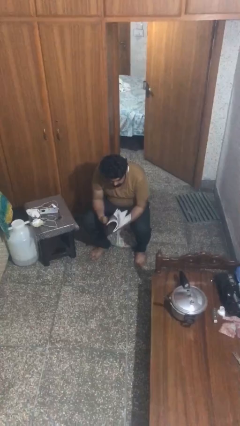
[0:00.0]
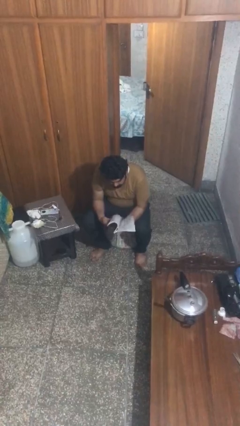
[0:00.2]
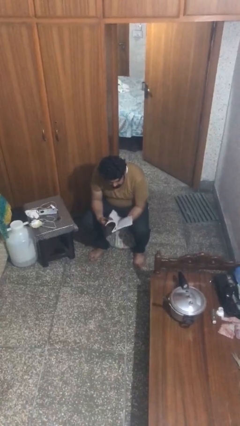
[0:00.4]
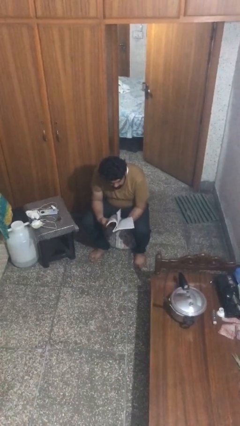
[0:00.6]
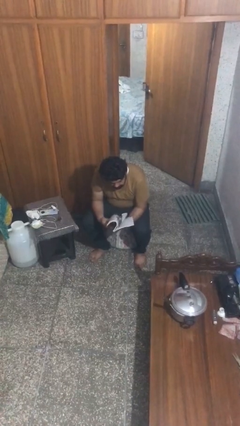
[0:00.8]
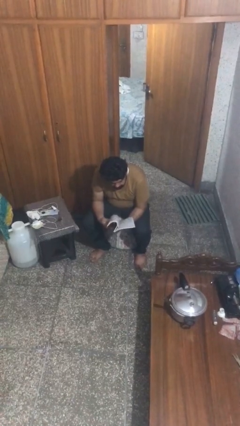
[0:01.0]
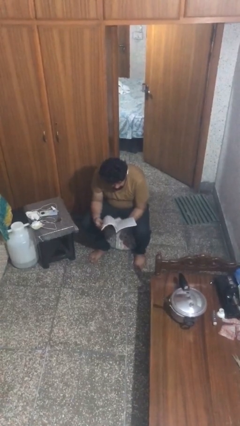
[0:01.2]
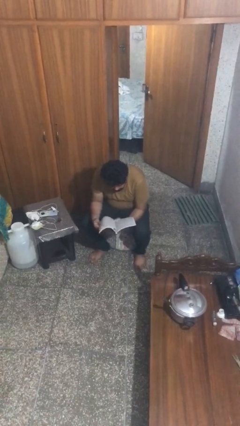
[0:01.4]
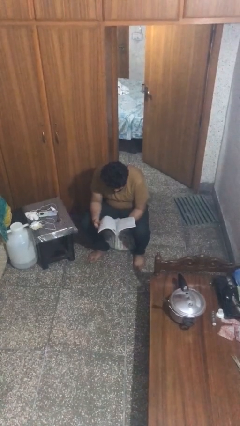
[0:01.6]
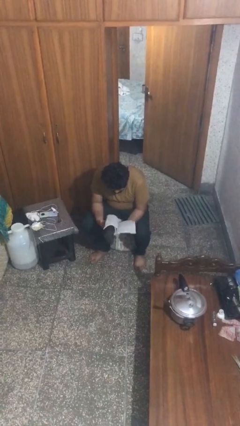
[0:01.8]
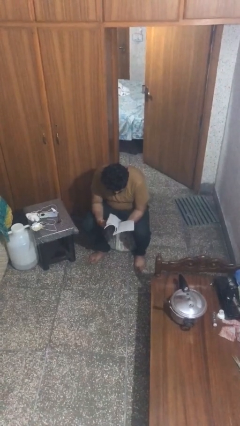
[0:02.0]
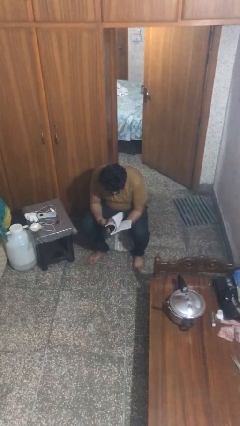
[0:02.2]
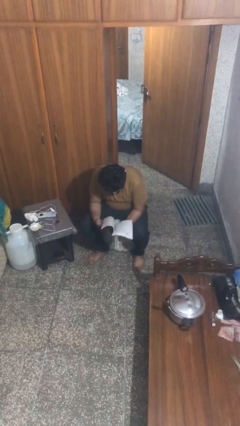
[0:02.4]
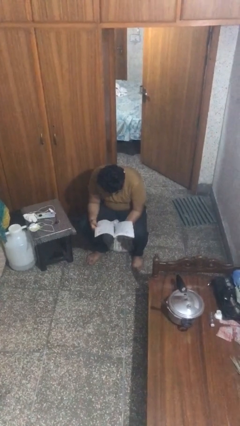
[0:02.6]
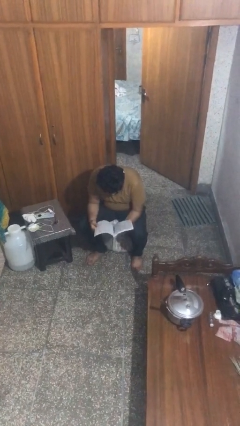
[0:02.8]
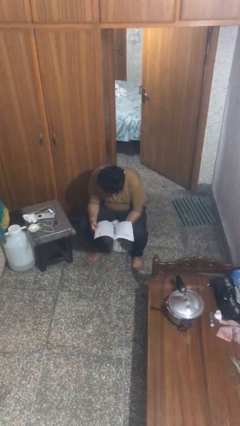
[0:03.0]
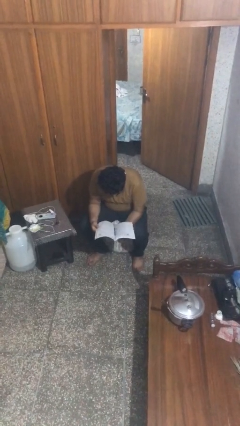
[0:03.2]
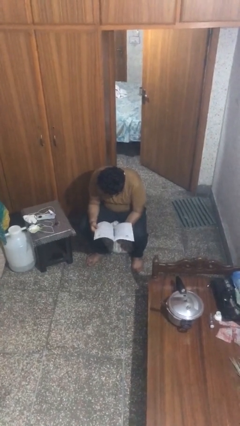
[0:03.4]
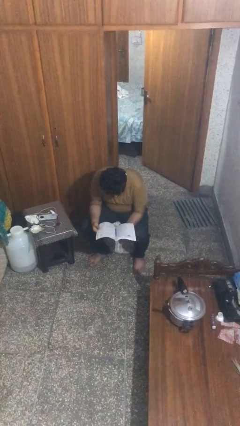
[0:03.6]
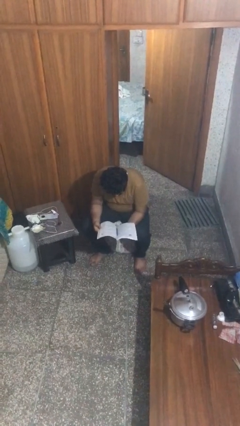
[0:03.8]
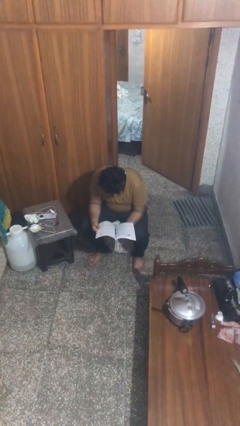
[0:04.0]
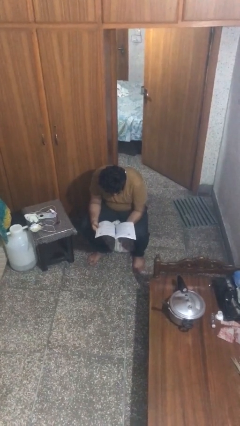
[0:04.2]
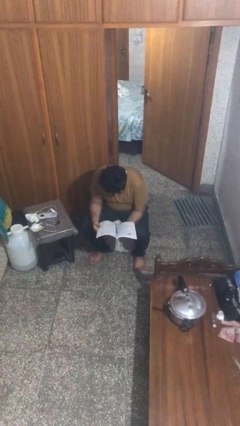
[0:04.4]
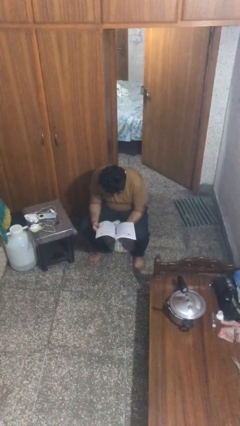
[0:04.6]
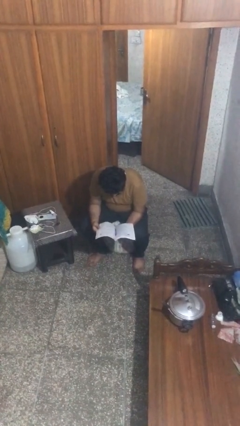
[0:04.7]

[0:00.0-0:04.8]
person reads document

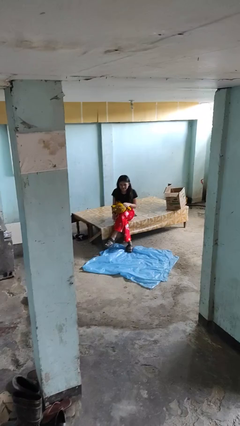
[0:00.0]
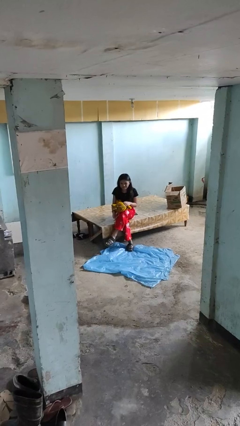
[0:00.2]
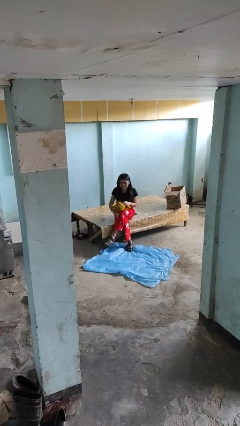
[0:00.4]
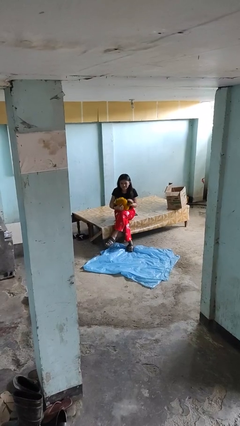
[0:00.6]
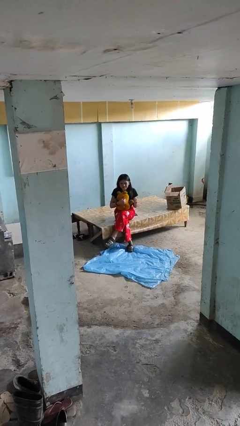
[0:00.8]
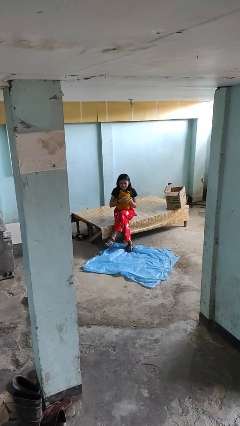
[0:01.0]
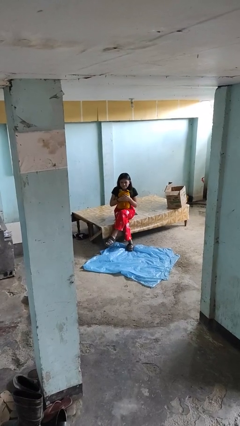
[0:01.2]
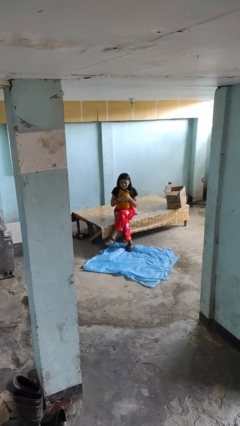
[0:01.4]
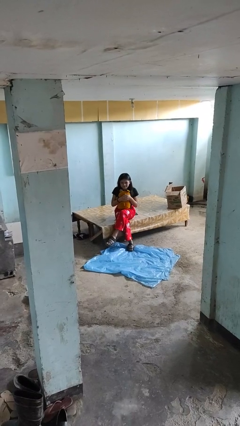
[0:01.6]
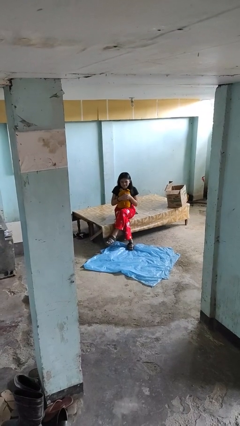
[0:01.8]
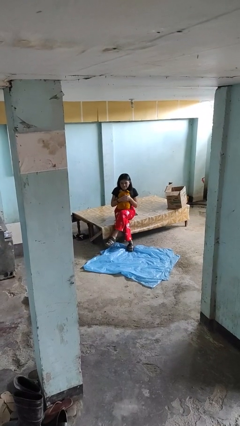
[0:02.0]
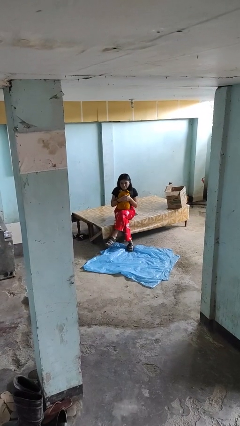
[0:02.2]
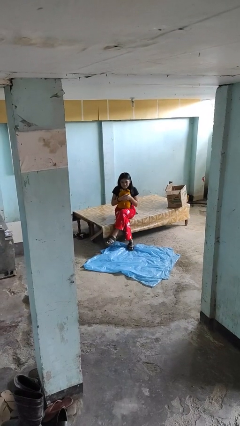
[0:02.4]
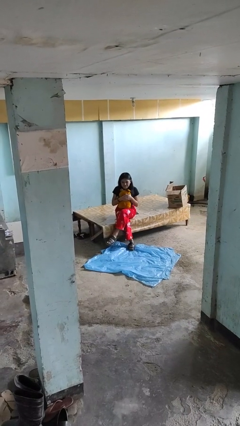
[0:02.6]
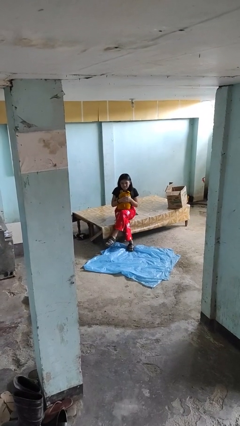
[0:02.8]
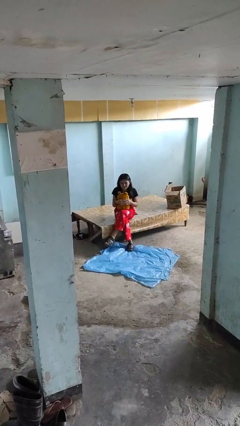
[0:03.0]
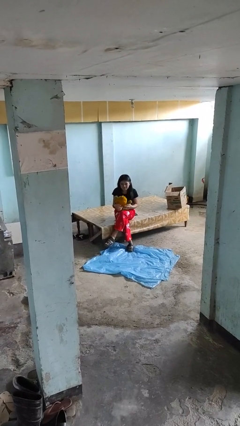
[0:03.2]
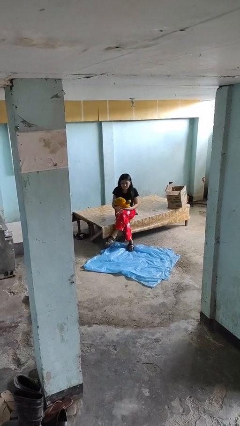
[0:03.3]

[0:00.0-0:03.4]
person hugs stuffed animal

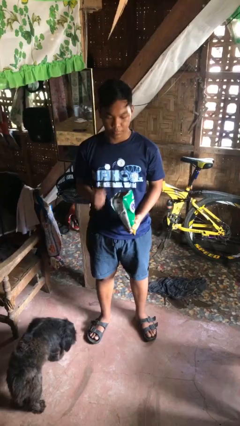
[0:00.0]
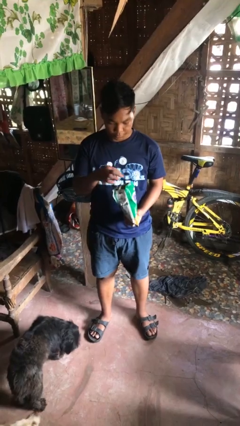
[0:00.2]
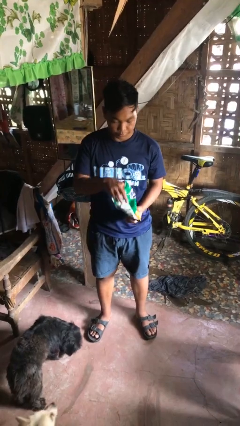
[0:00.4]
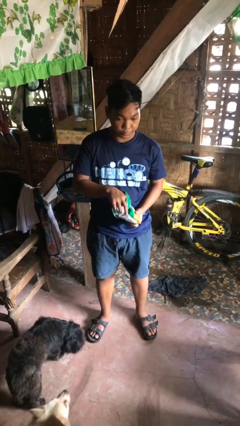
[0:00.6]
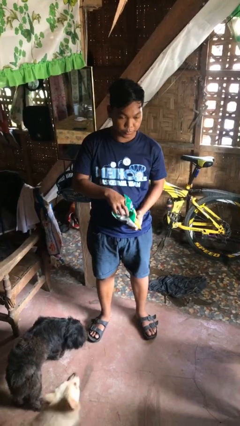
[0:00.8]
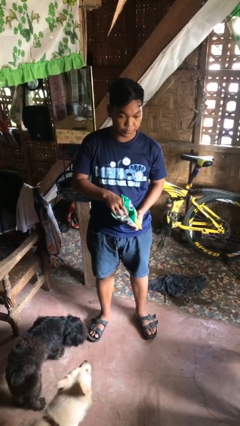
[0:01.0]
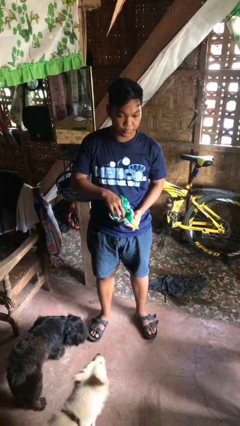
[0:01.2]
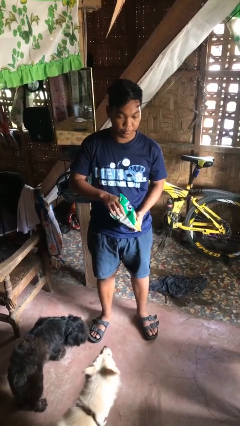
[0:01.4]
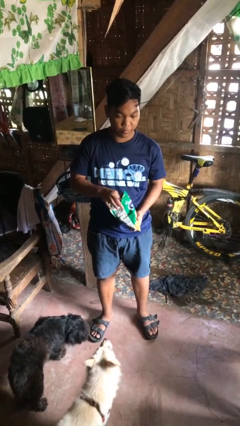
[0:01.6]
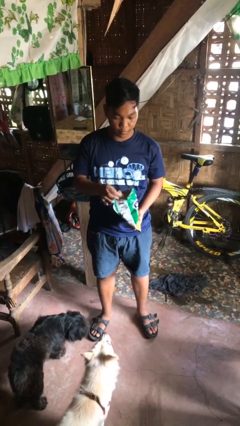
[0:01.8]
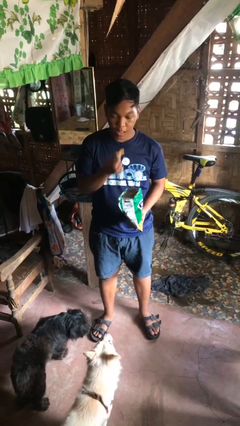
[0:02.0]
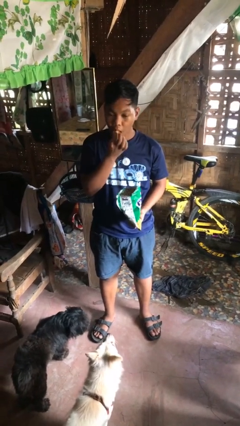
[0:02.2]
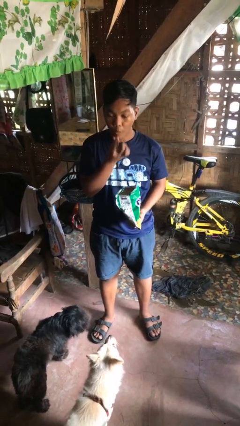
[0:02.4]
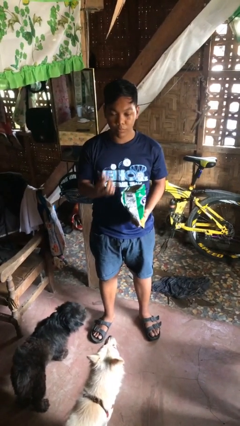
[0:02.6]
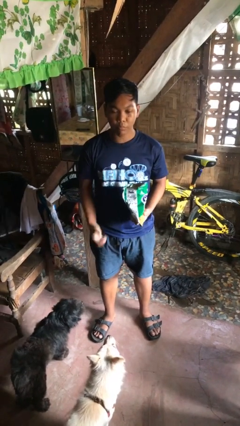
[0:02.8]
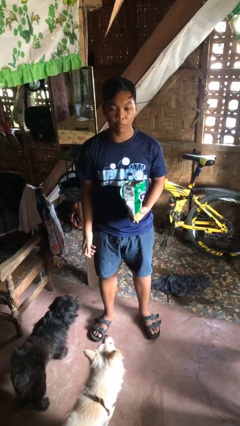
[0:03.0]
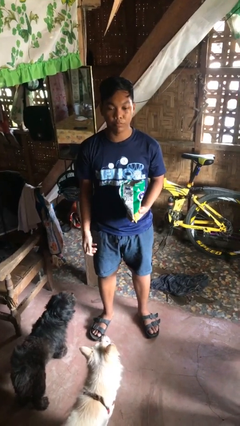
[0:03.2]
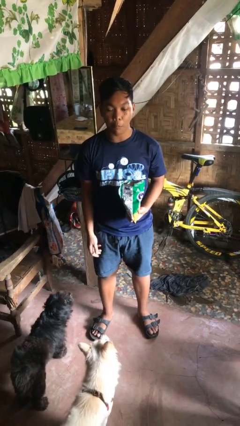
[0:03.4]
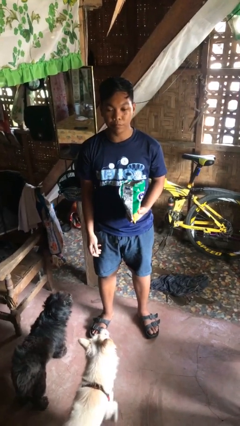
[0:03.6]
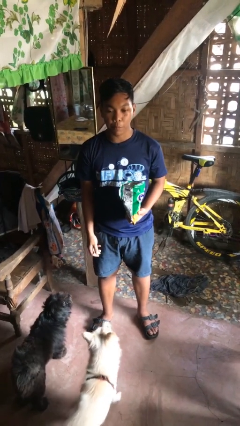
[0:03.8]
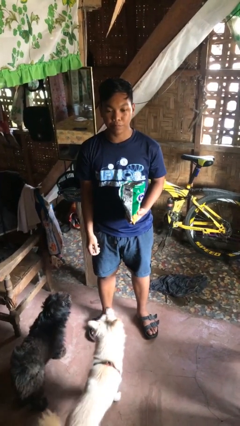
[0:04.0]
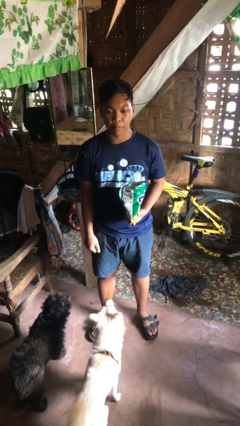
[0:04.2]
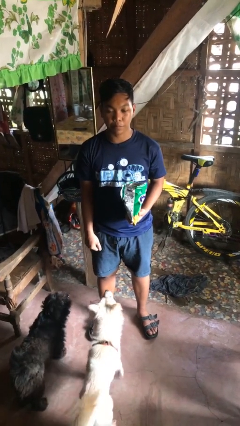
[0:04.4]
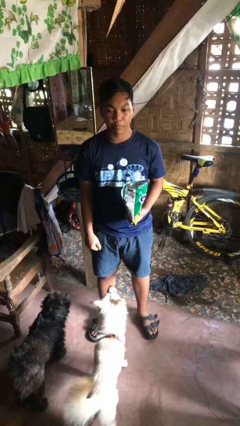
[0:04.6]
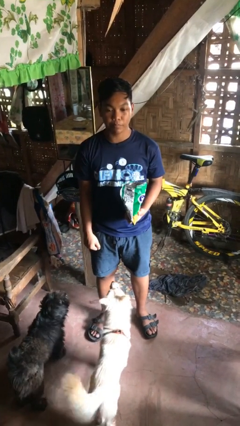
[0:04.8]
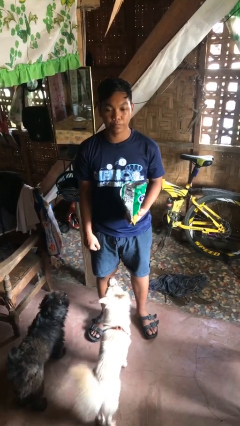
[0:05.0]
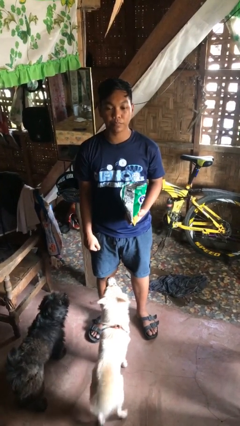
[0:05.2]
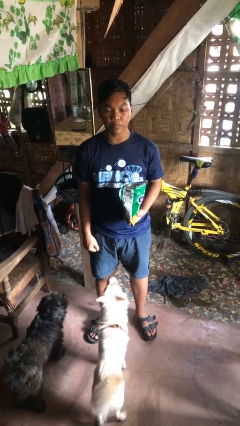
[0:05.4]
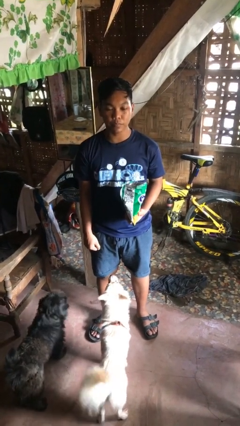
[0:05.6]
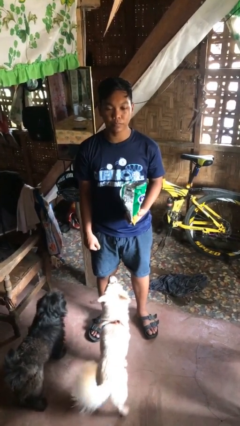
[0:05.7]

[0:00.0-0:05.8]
person eats snack from bag

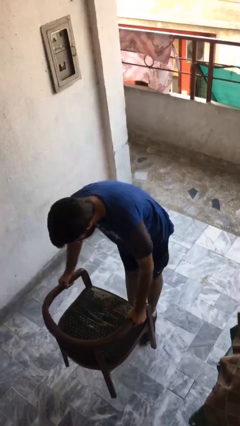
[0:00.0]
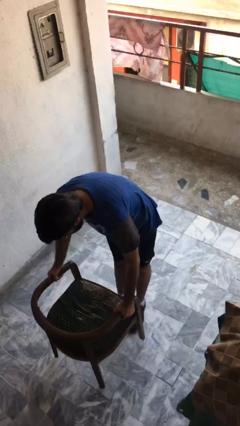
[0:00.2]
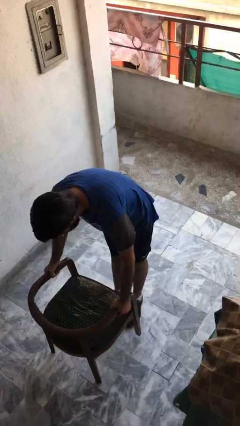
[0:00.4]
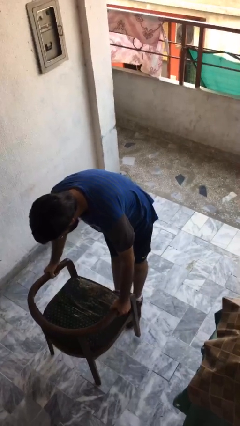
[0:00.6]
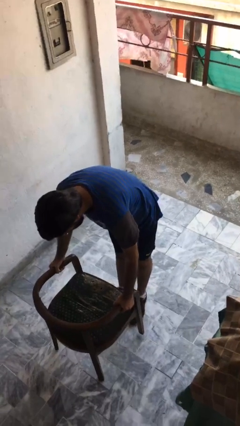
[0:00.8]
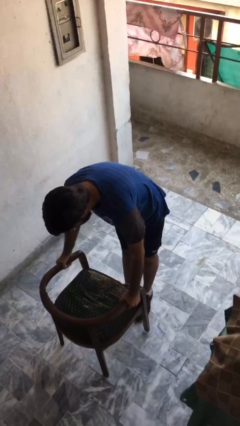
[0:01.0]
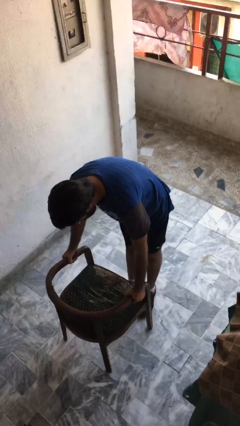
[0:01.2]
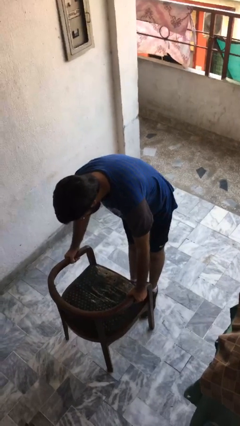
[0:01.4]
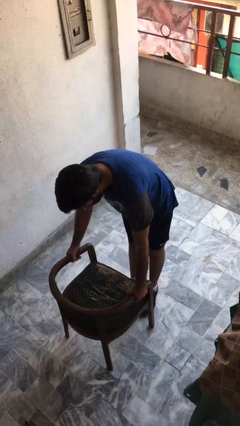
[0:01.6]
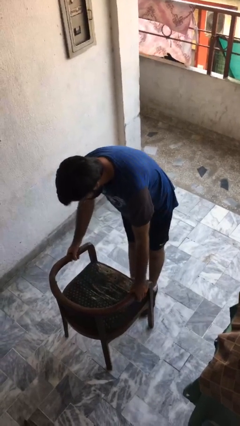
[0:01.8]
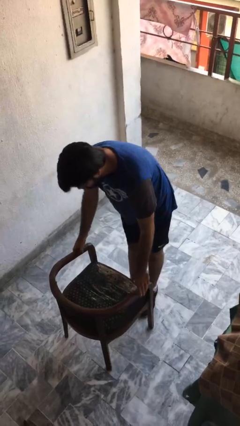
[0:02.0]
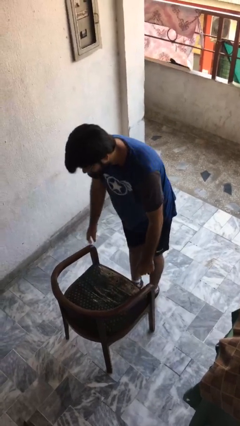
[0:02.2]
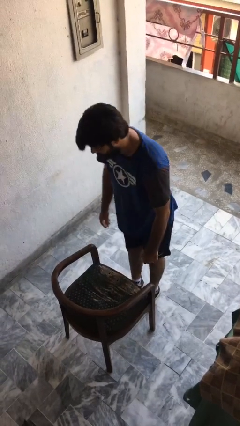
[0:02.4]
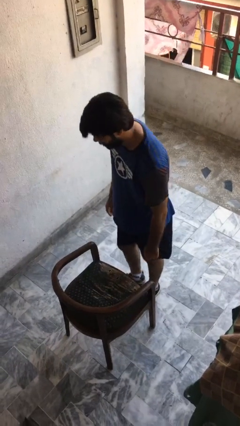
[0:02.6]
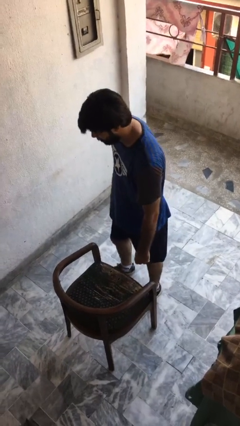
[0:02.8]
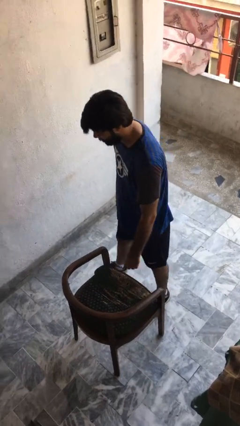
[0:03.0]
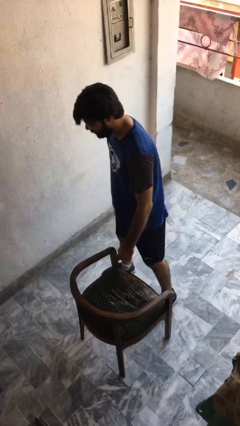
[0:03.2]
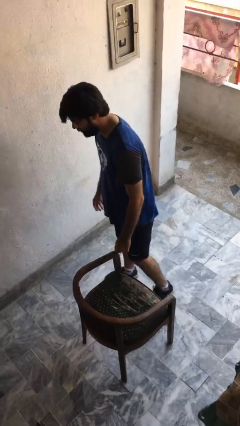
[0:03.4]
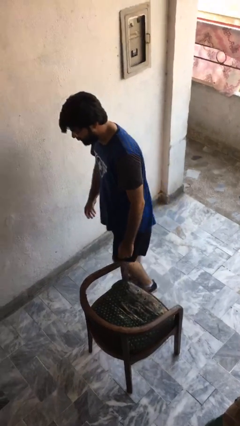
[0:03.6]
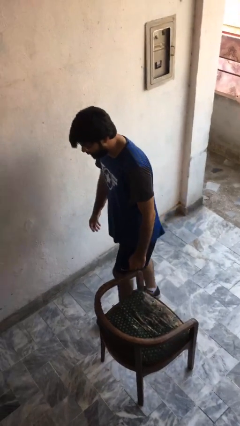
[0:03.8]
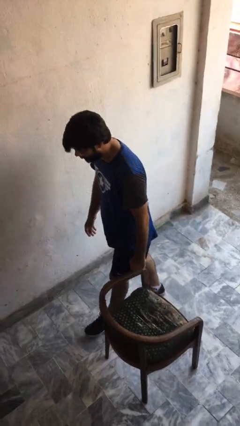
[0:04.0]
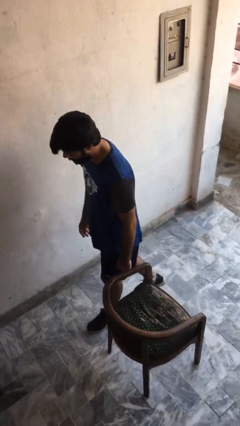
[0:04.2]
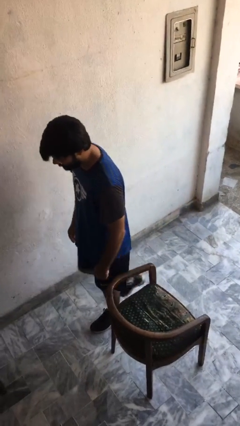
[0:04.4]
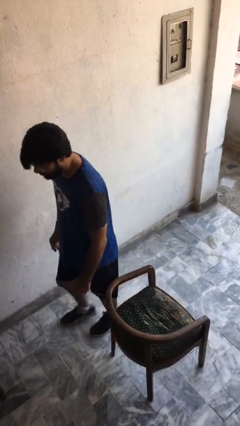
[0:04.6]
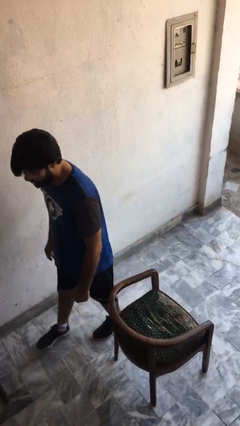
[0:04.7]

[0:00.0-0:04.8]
person puts down object on floor
